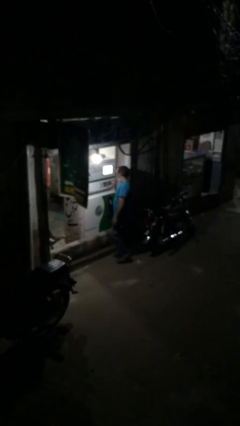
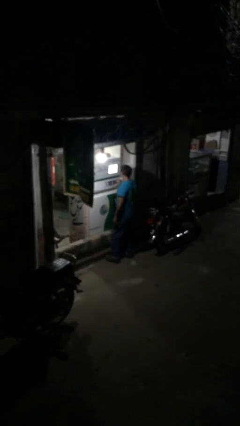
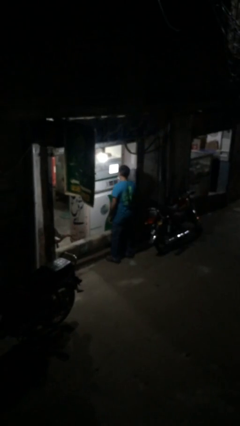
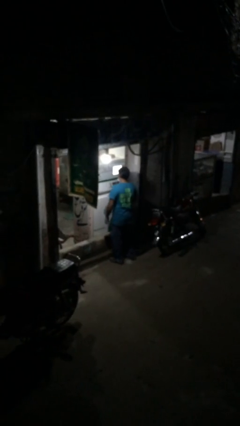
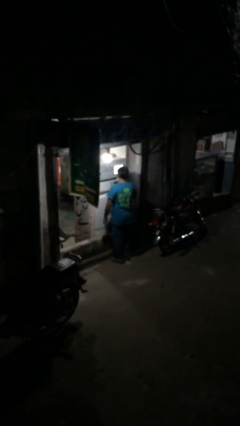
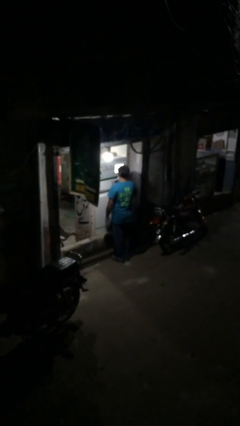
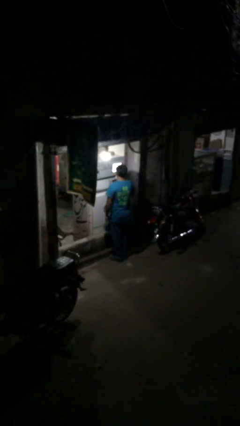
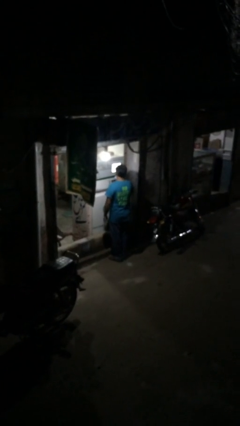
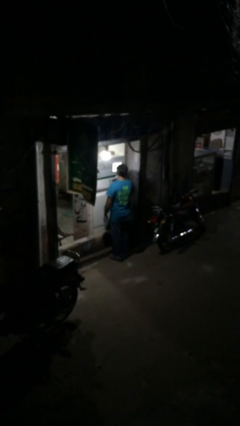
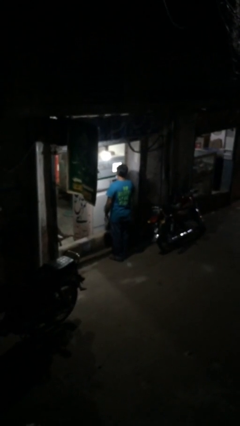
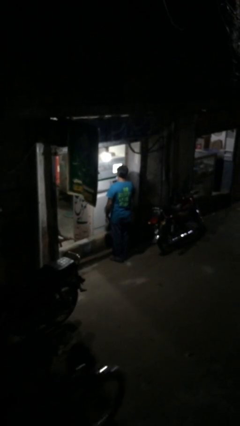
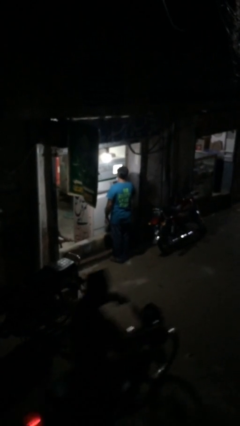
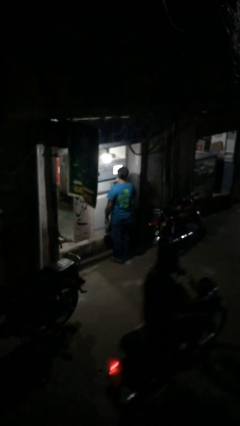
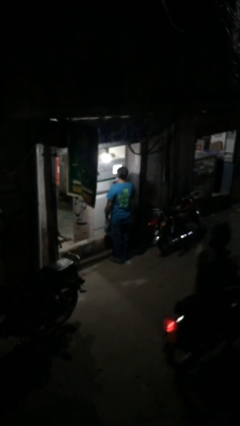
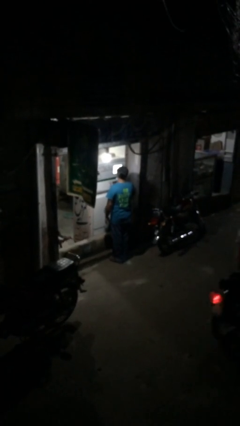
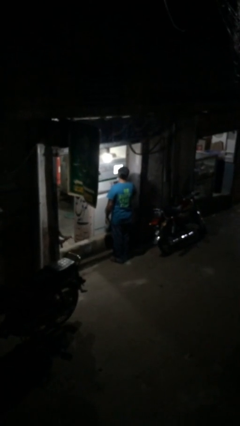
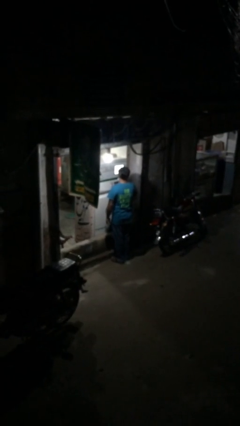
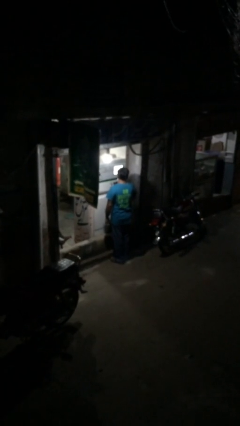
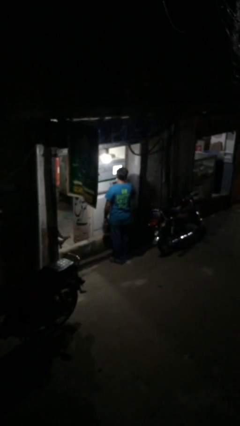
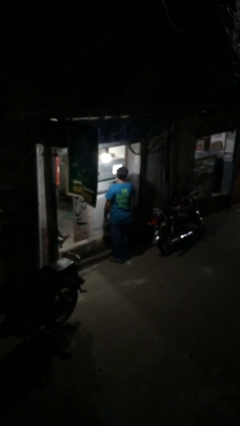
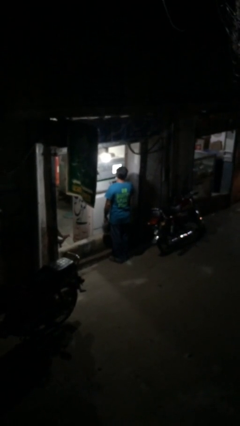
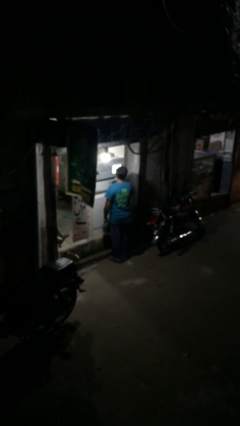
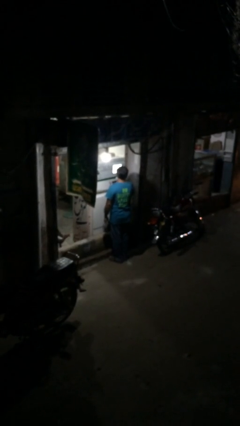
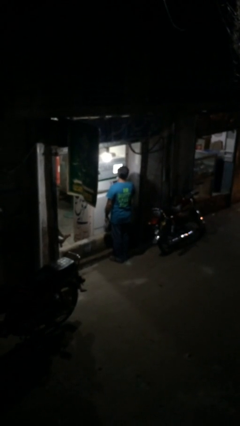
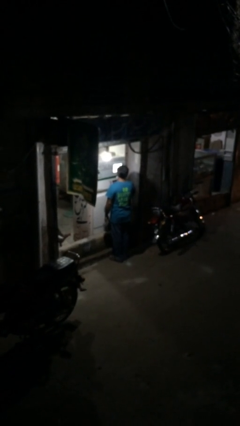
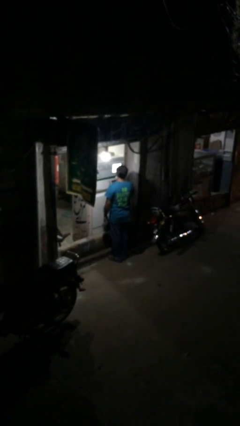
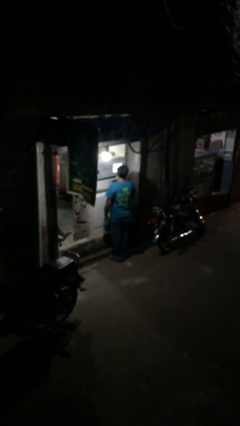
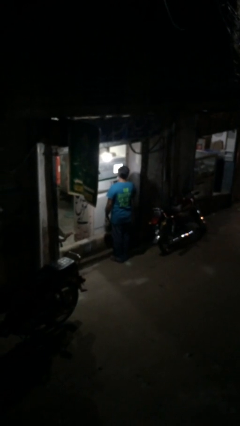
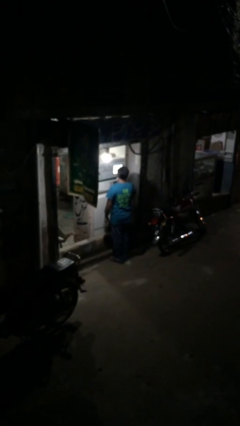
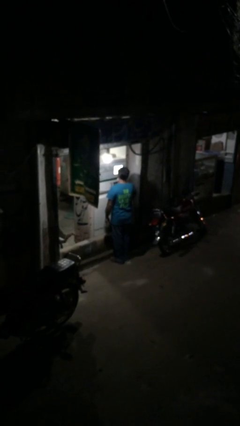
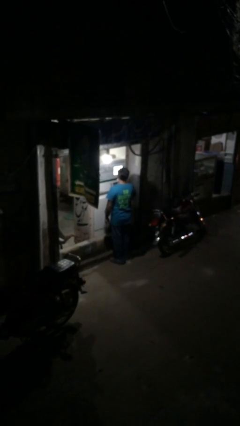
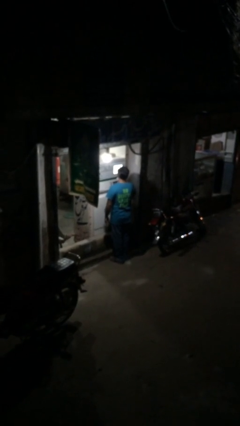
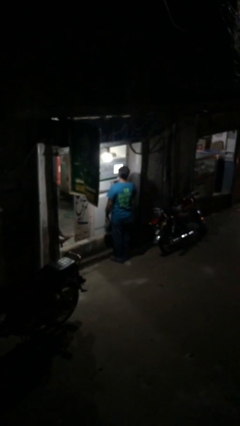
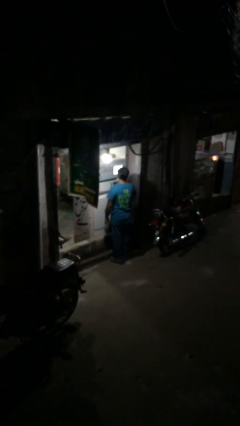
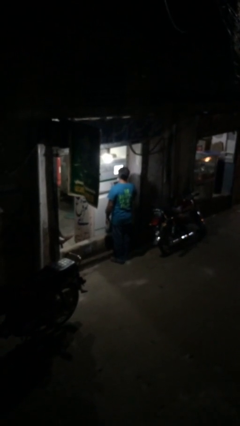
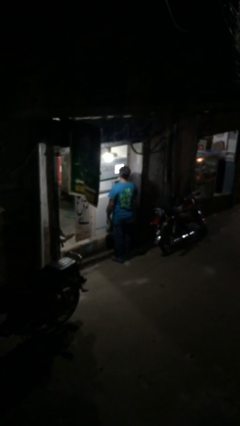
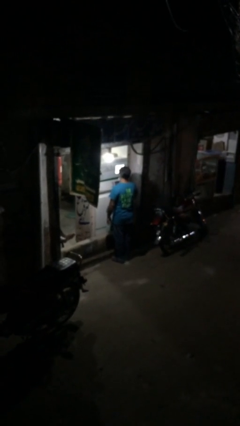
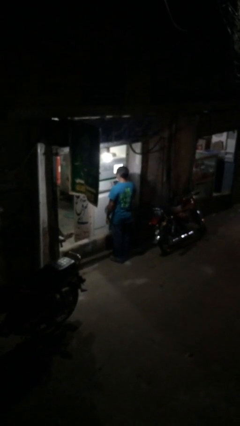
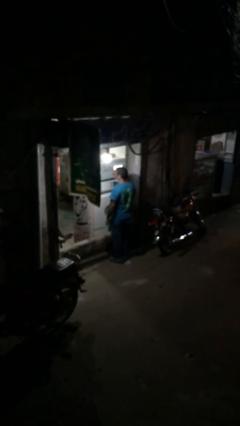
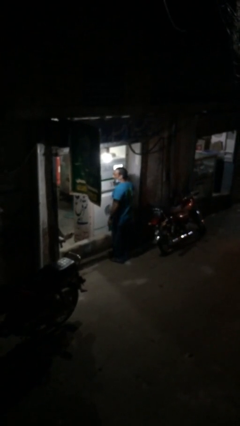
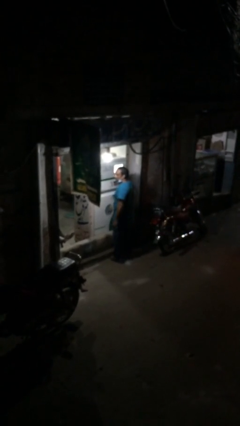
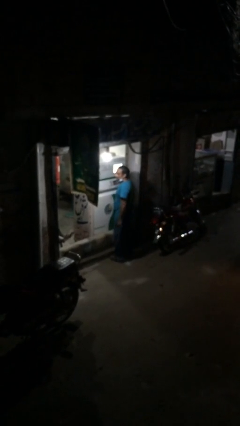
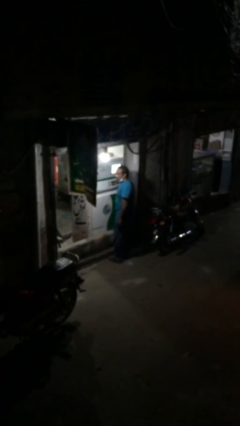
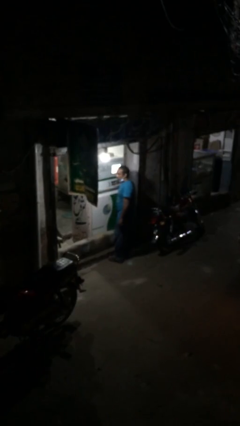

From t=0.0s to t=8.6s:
person purchases from machine

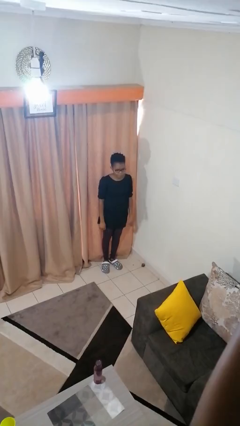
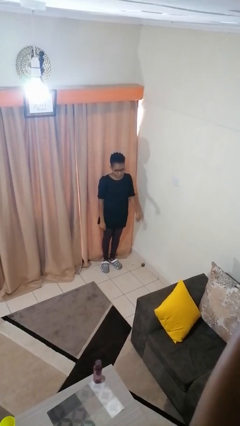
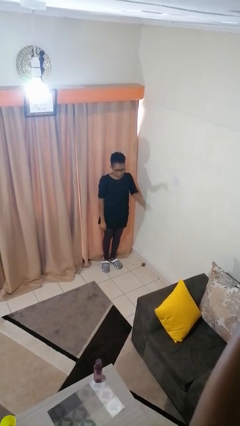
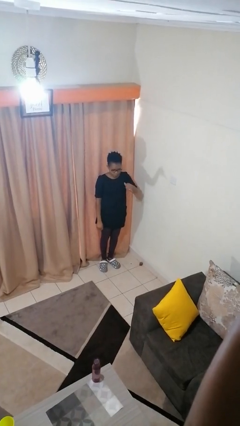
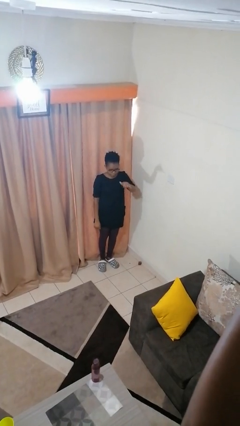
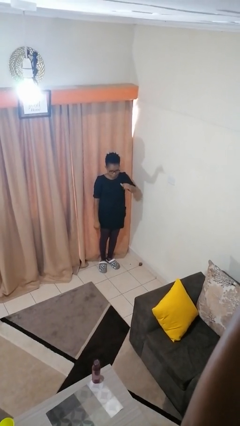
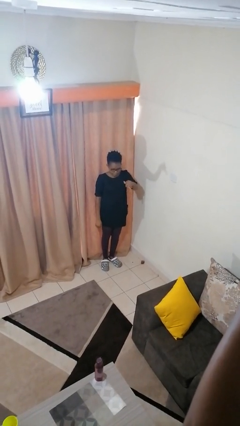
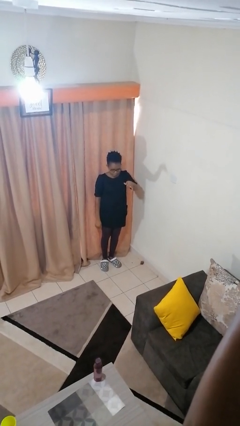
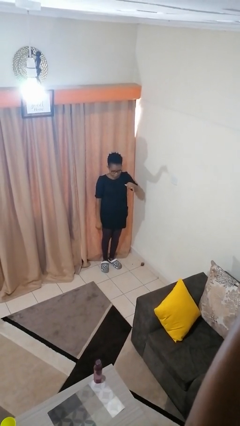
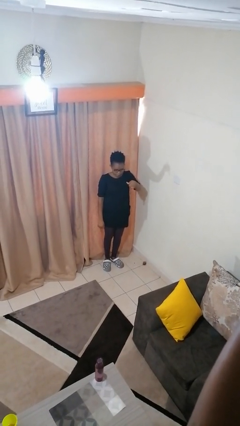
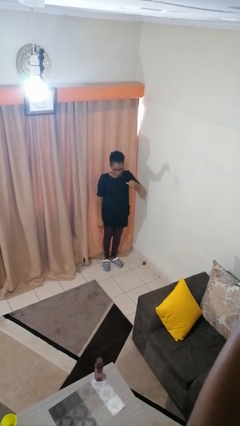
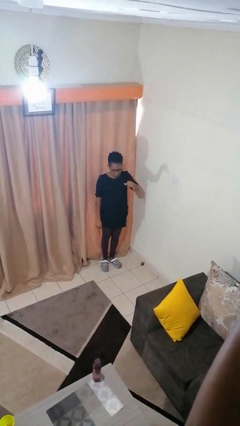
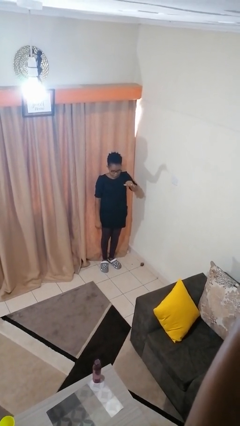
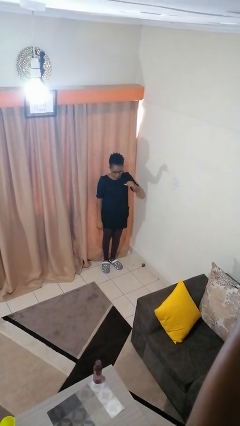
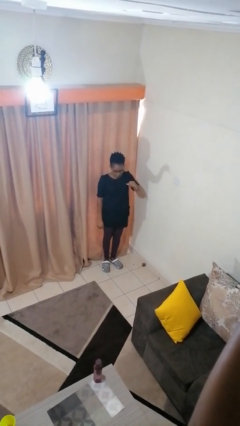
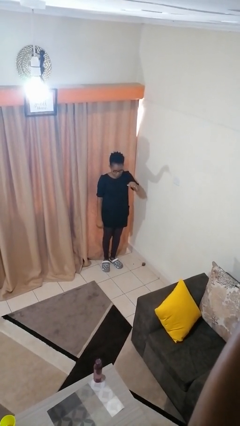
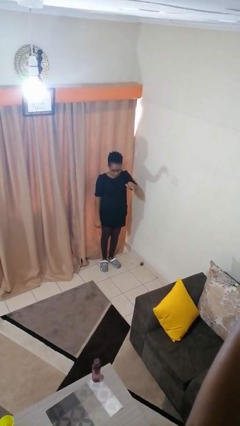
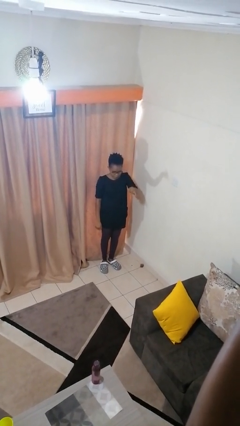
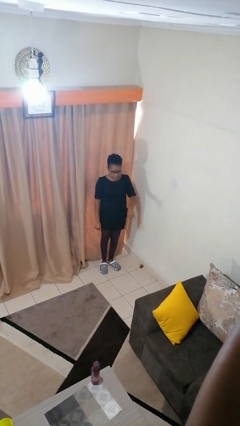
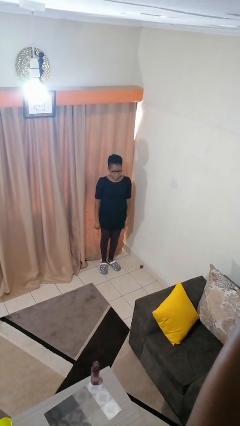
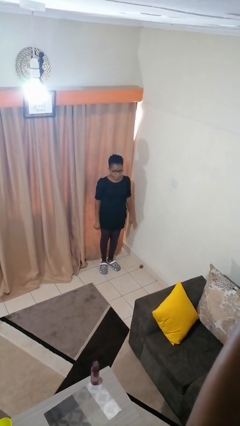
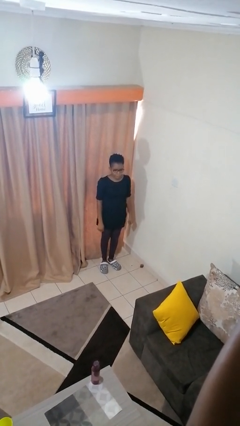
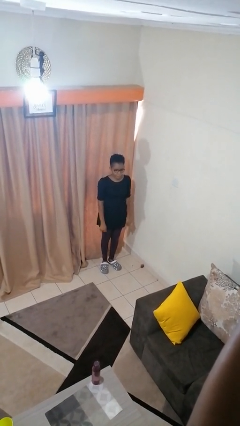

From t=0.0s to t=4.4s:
person gestures hang loose

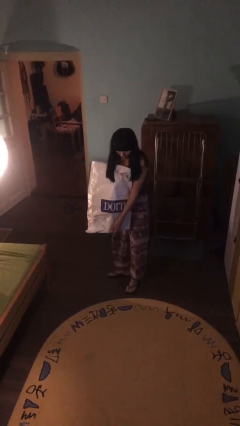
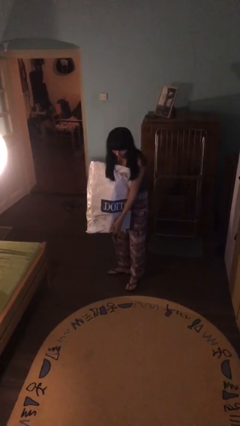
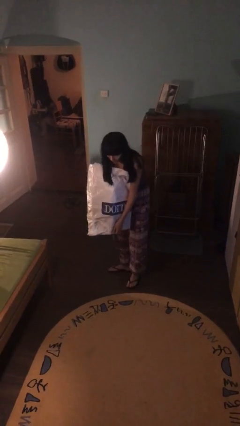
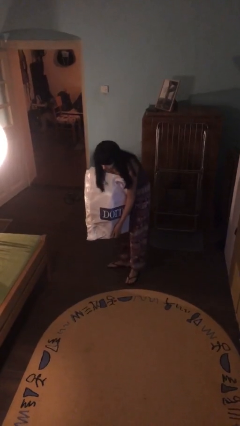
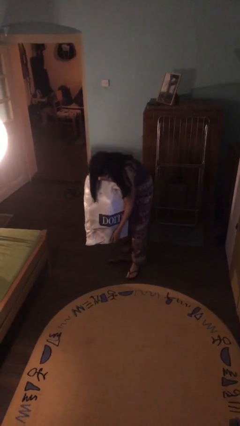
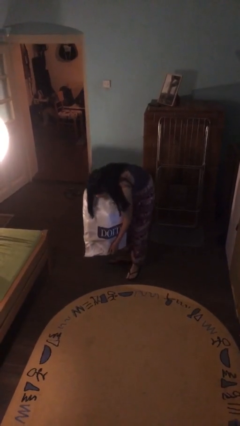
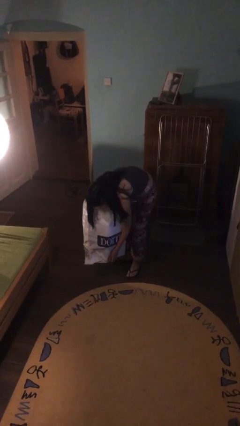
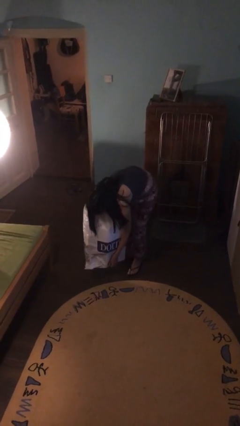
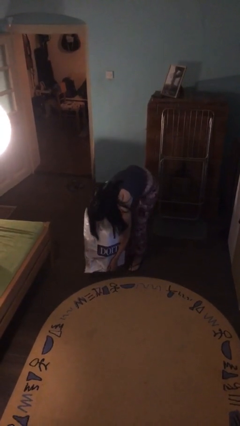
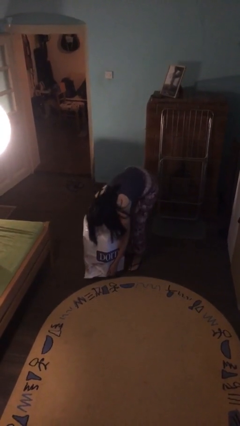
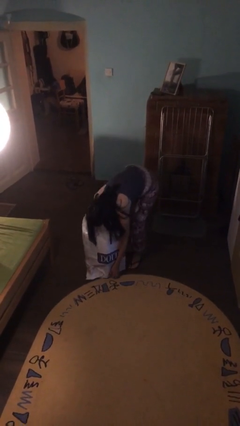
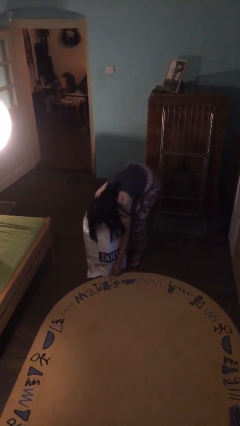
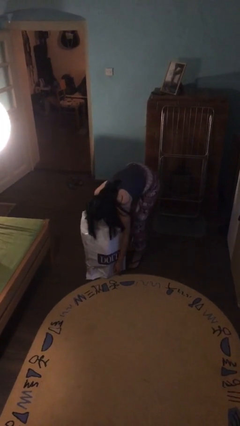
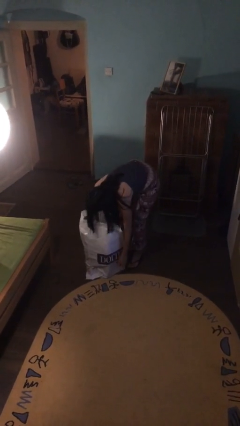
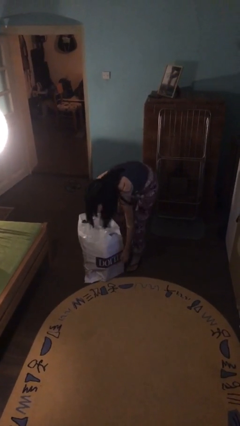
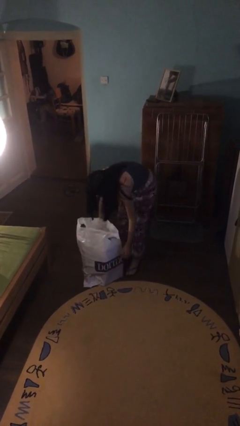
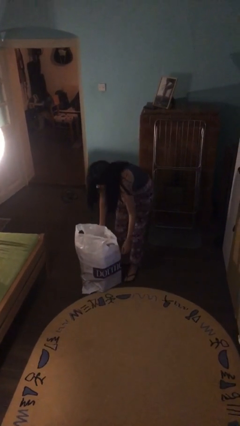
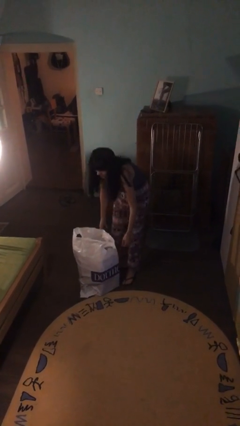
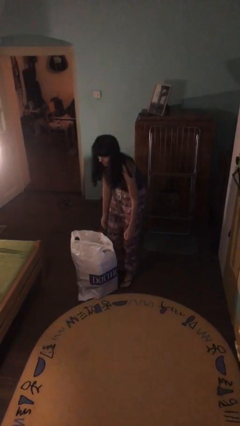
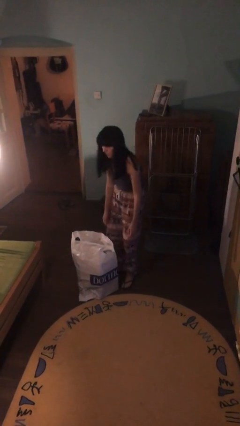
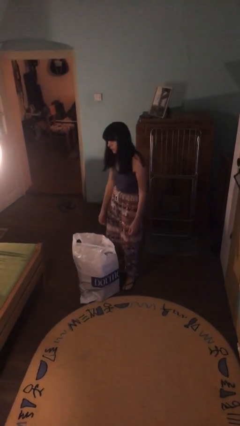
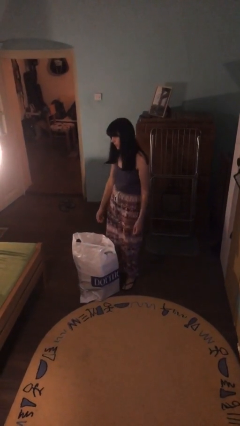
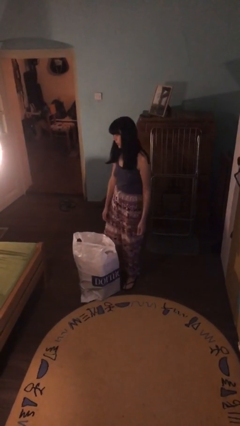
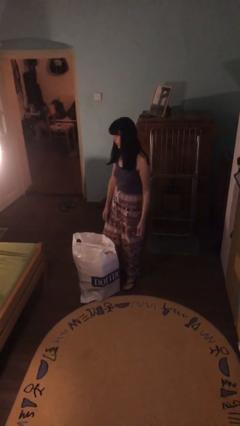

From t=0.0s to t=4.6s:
person puts down object on floor

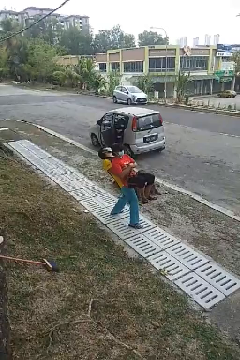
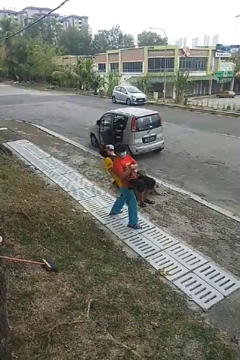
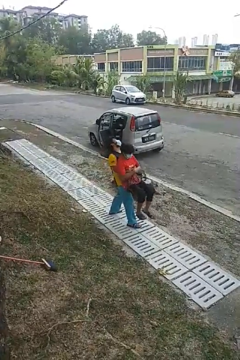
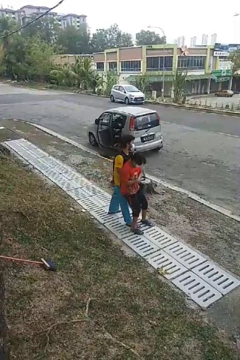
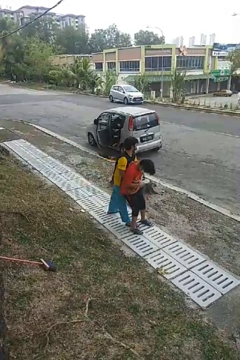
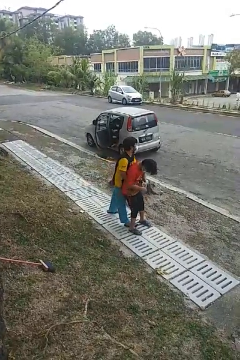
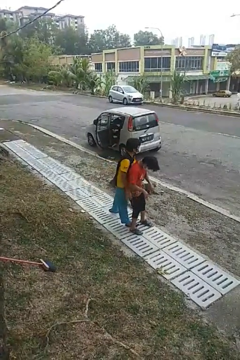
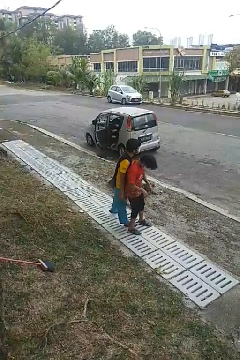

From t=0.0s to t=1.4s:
person puts down person
